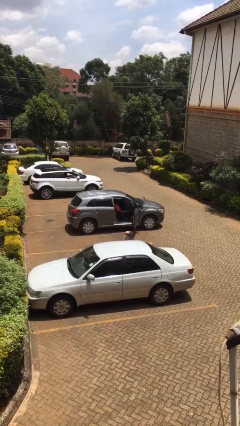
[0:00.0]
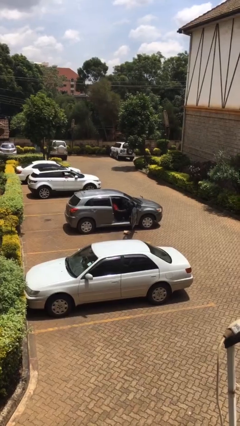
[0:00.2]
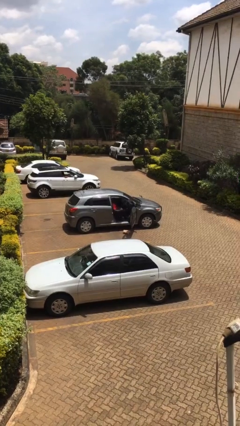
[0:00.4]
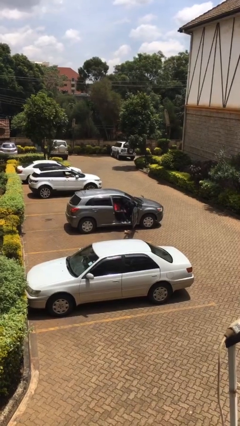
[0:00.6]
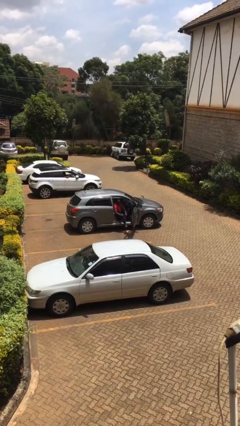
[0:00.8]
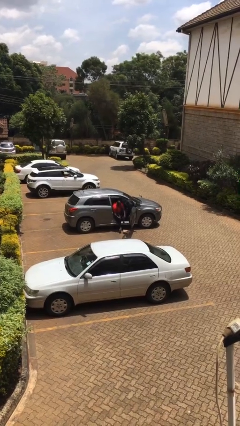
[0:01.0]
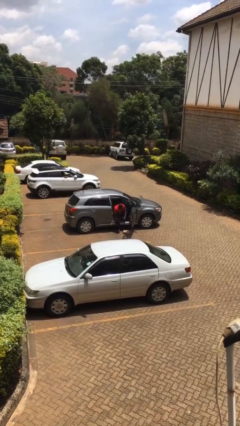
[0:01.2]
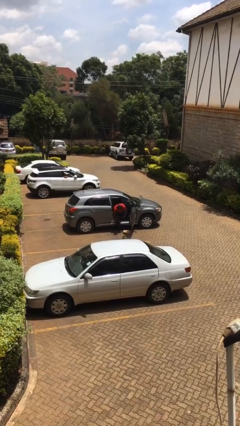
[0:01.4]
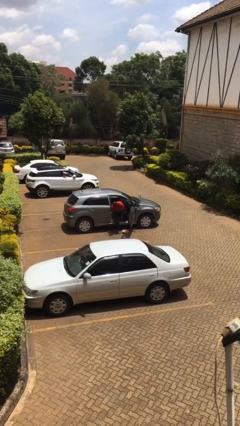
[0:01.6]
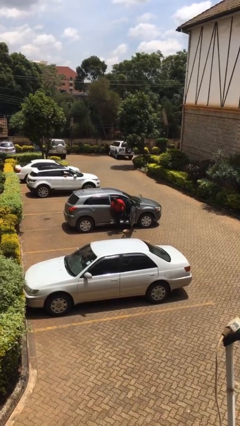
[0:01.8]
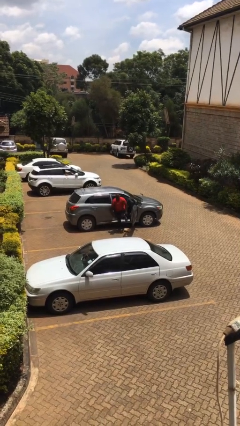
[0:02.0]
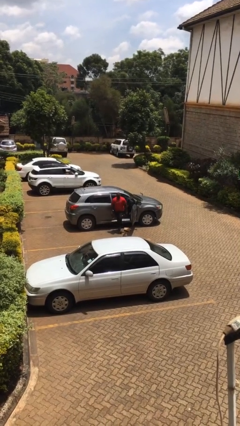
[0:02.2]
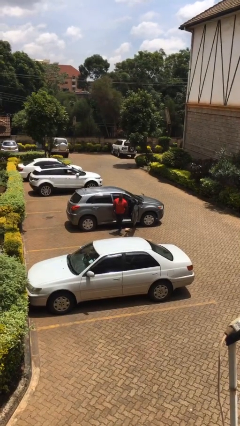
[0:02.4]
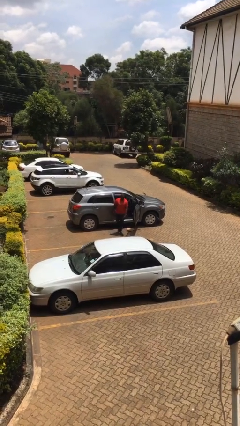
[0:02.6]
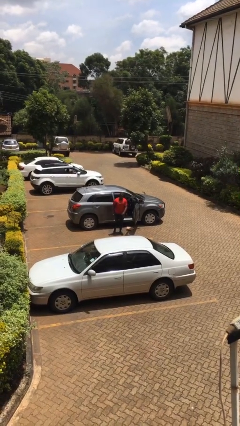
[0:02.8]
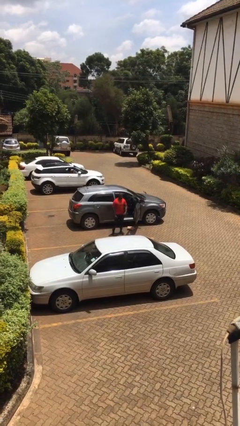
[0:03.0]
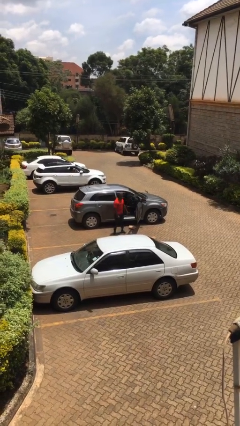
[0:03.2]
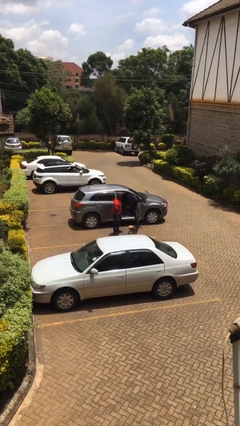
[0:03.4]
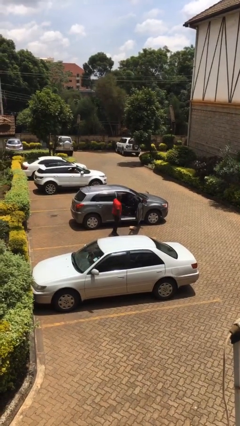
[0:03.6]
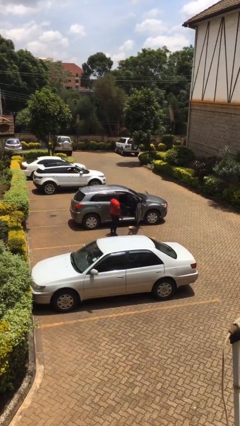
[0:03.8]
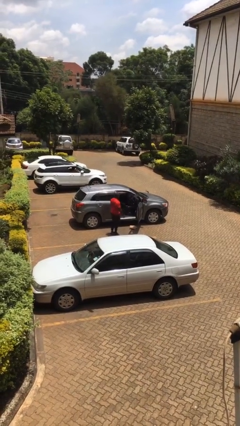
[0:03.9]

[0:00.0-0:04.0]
person exits car

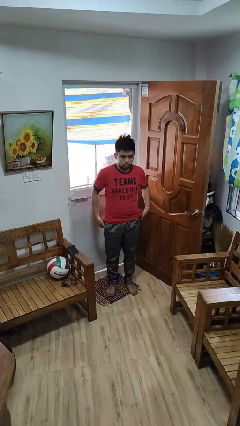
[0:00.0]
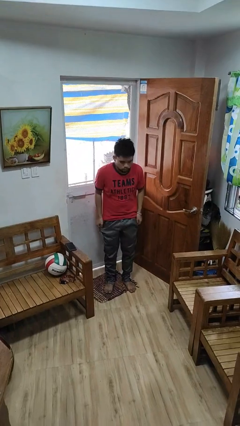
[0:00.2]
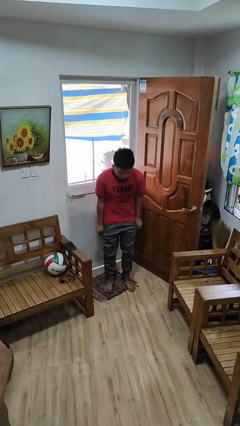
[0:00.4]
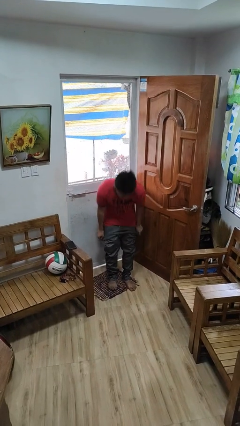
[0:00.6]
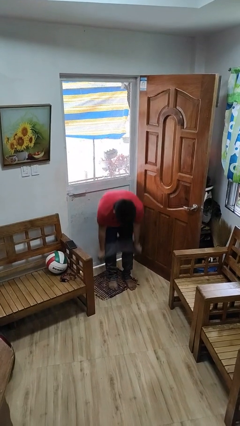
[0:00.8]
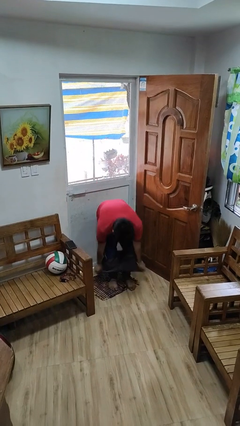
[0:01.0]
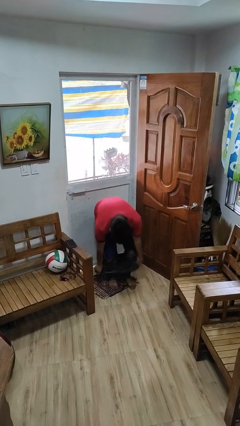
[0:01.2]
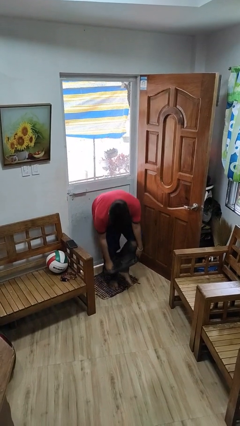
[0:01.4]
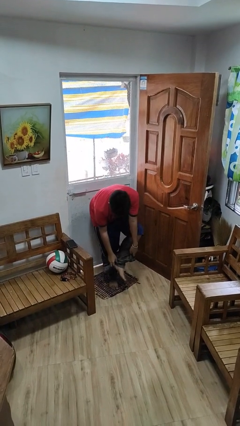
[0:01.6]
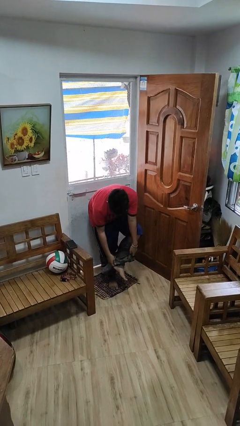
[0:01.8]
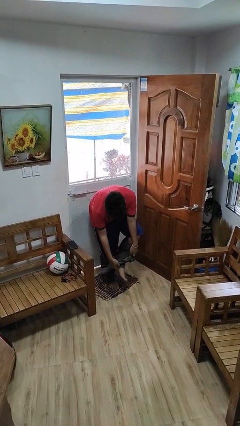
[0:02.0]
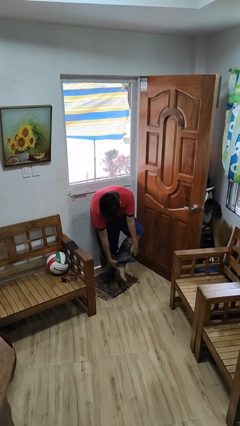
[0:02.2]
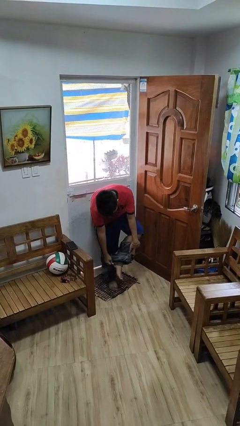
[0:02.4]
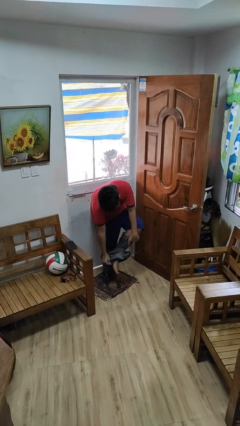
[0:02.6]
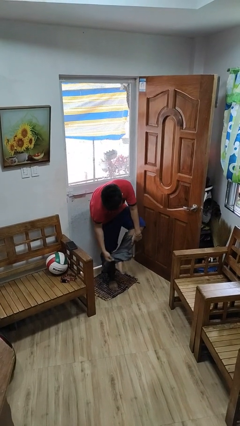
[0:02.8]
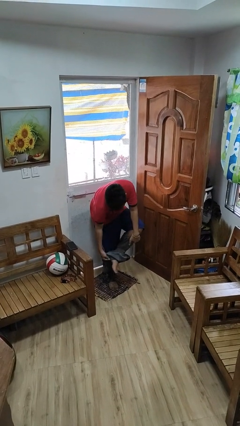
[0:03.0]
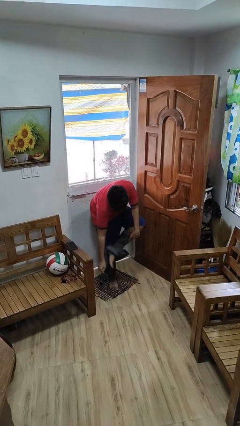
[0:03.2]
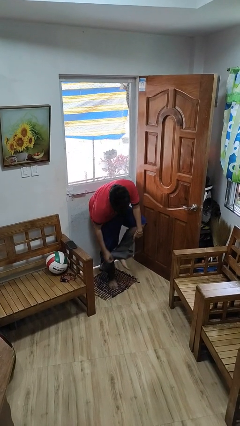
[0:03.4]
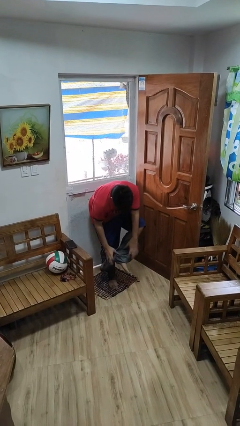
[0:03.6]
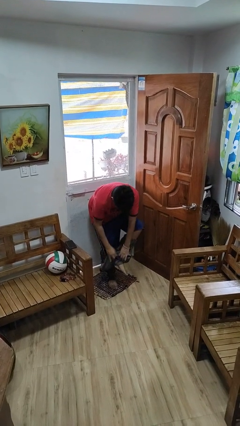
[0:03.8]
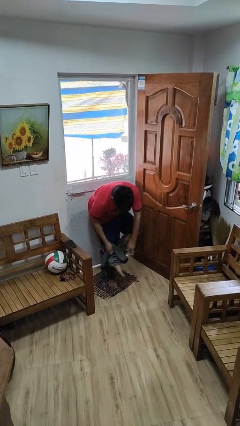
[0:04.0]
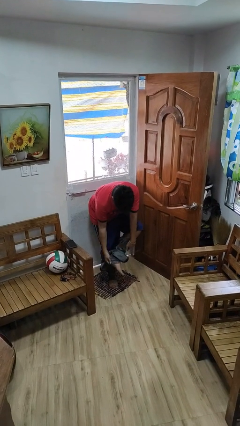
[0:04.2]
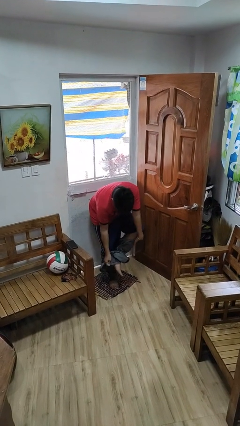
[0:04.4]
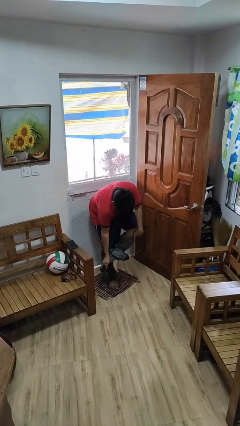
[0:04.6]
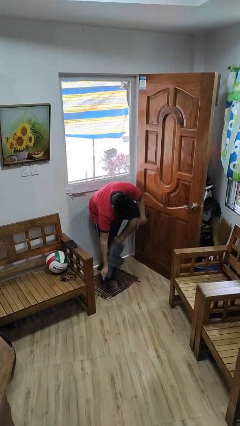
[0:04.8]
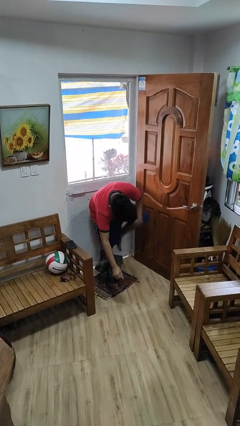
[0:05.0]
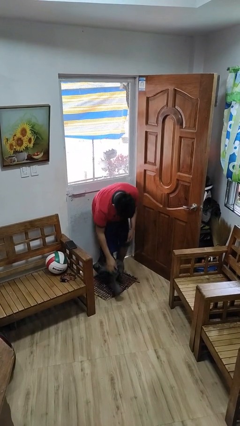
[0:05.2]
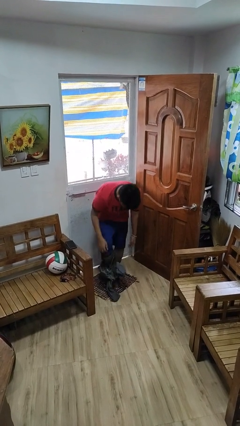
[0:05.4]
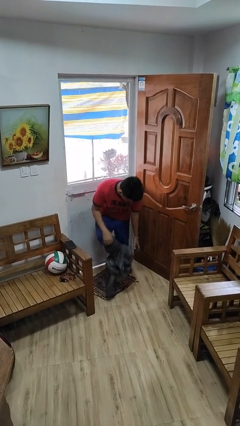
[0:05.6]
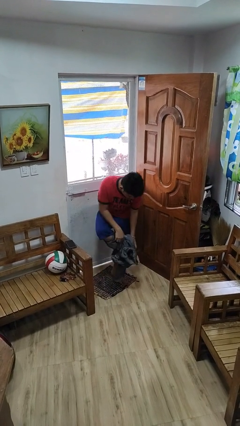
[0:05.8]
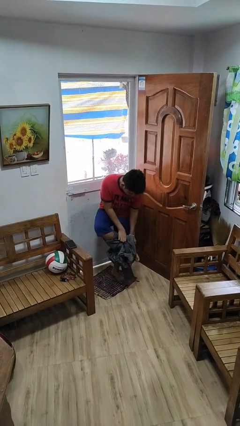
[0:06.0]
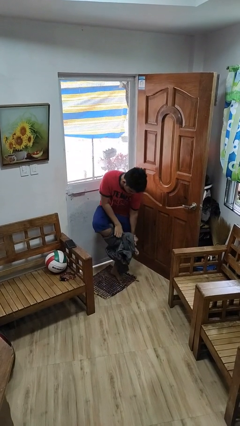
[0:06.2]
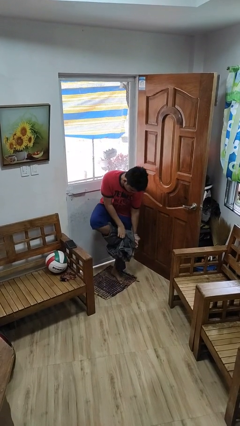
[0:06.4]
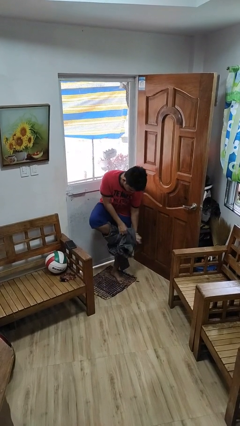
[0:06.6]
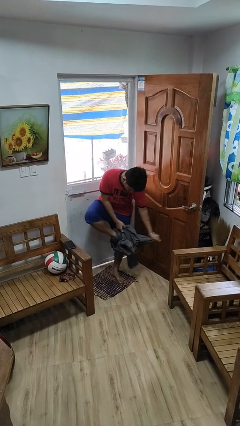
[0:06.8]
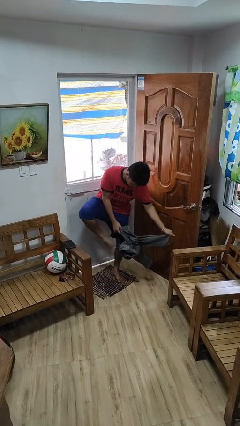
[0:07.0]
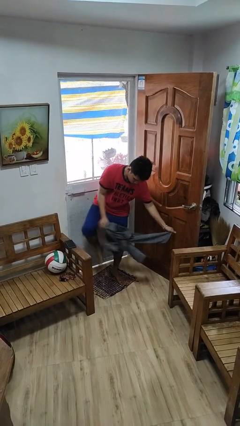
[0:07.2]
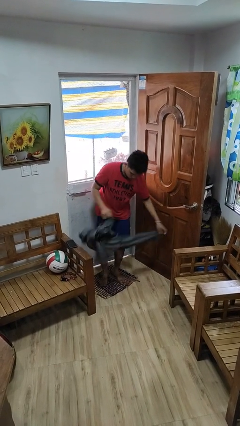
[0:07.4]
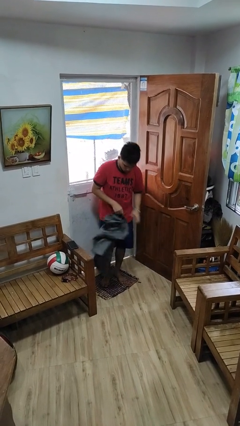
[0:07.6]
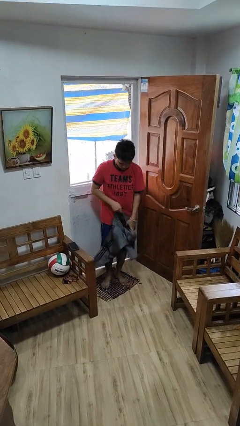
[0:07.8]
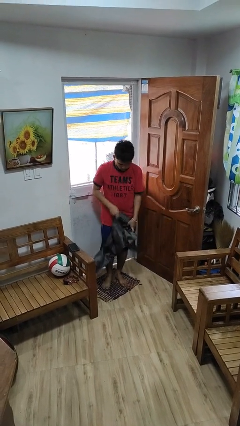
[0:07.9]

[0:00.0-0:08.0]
person takes off pants

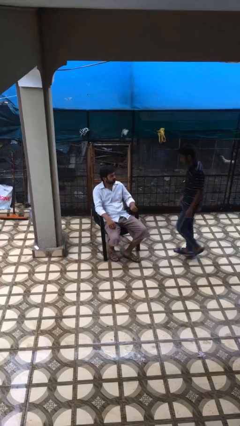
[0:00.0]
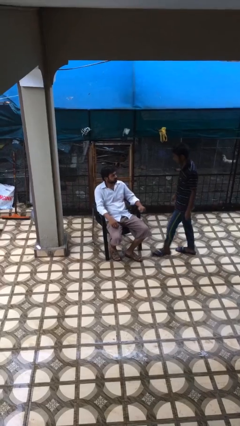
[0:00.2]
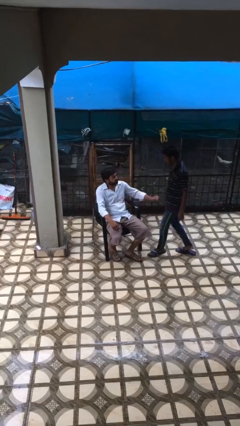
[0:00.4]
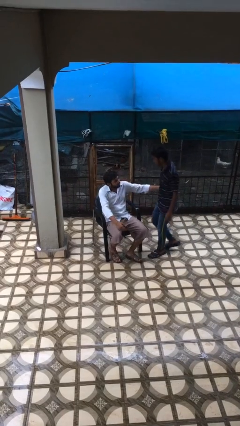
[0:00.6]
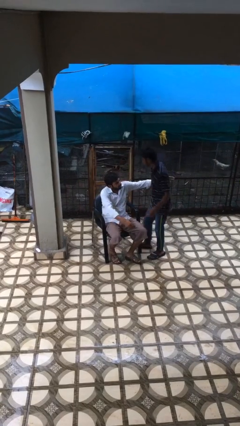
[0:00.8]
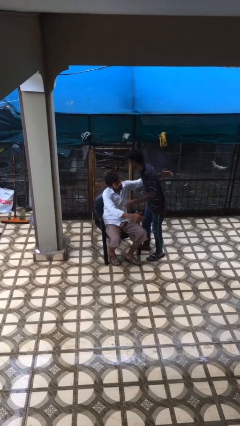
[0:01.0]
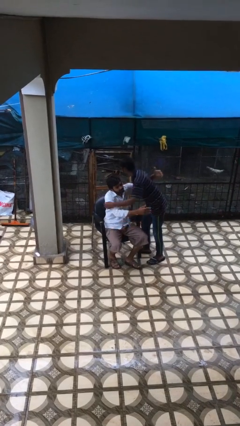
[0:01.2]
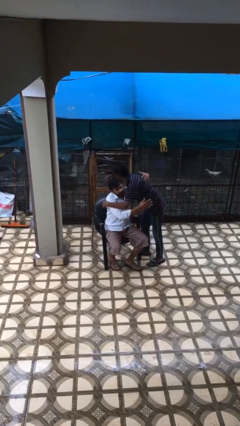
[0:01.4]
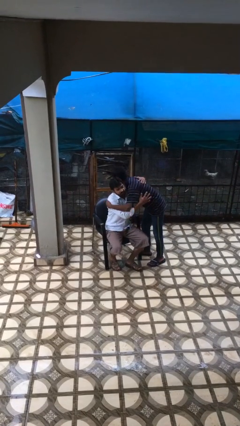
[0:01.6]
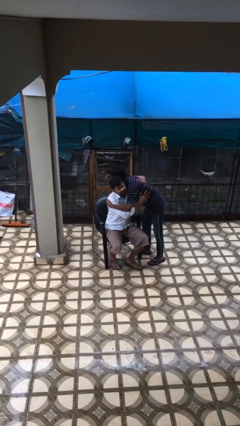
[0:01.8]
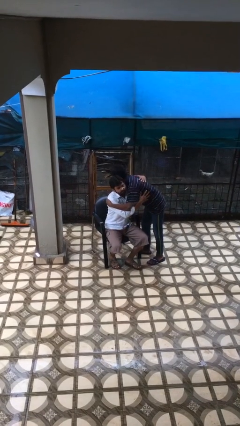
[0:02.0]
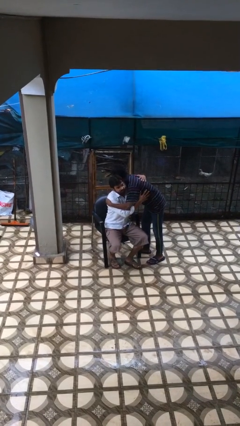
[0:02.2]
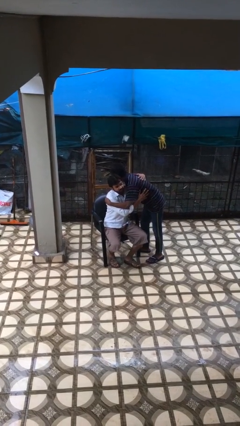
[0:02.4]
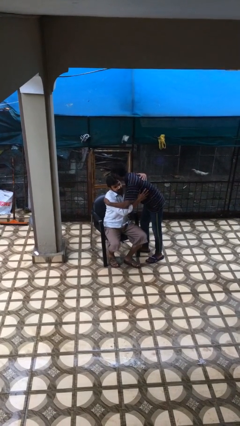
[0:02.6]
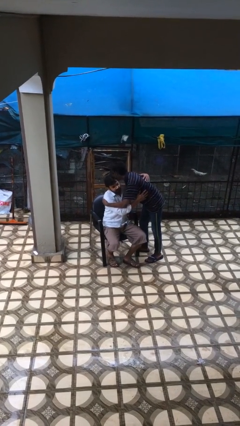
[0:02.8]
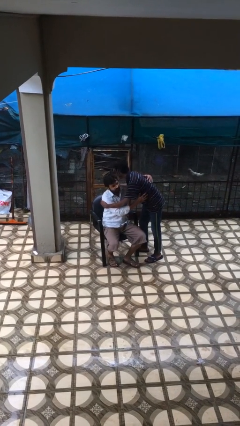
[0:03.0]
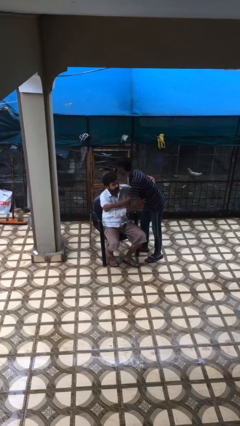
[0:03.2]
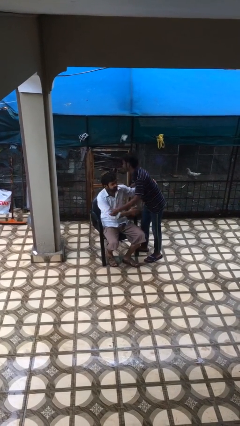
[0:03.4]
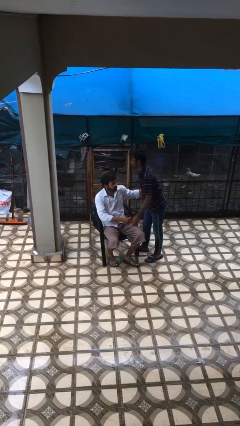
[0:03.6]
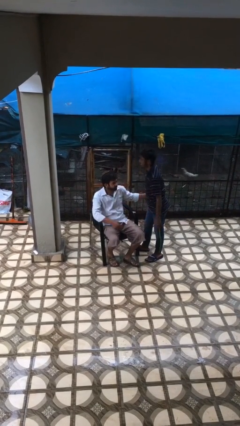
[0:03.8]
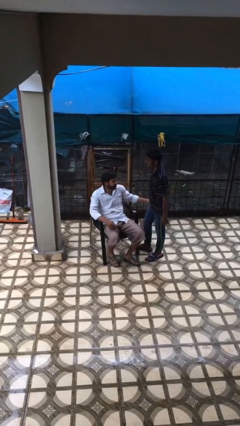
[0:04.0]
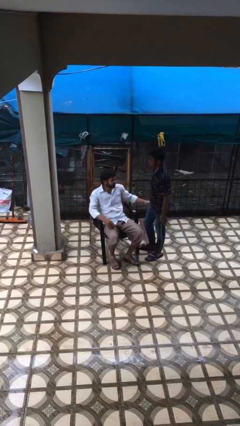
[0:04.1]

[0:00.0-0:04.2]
person embraces person

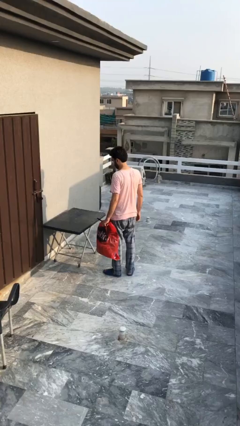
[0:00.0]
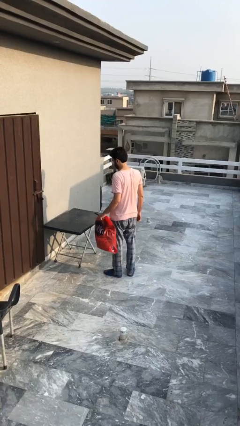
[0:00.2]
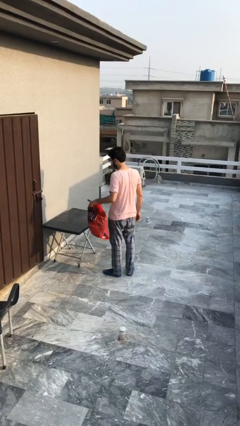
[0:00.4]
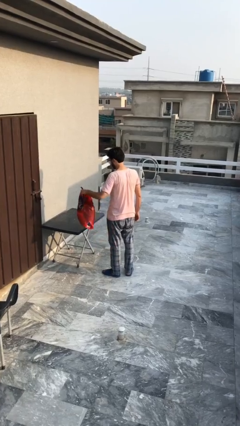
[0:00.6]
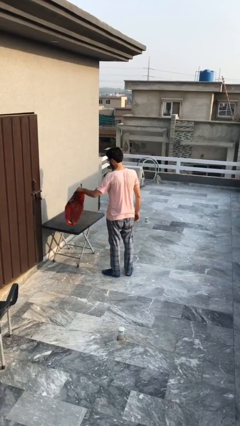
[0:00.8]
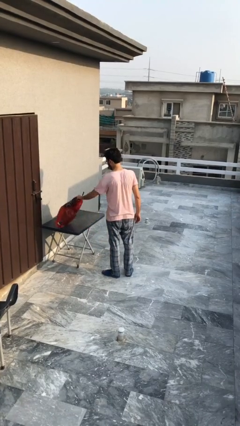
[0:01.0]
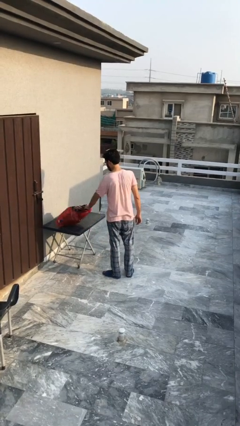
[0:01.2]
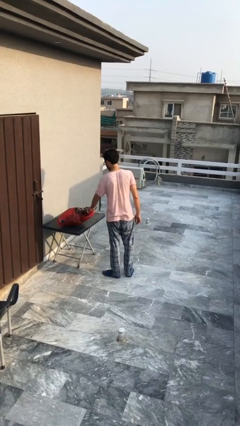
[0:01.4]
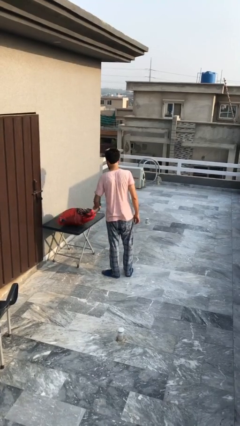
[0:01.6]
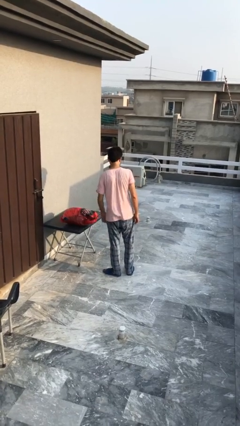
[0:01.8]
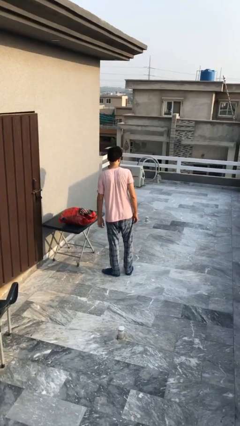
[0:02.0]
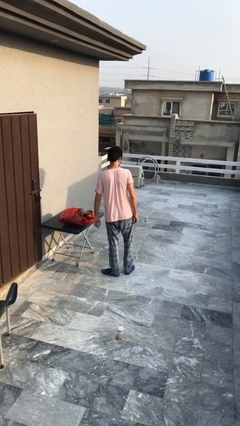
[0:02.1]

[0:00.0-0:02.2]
person puts down object on table
